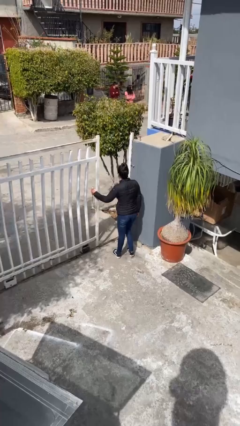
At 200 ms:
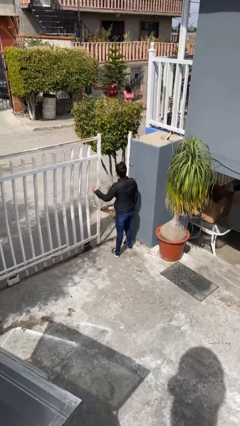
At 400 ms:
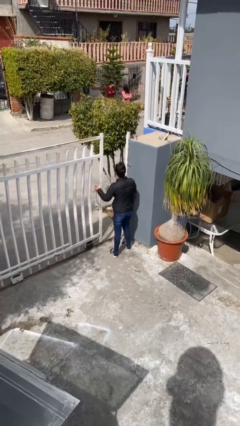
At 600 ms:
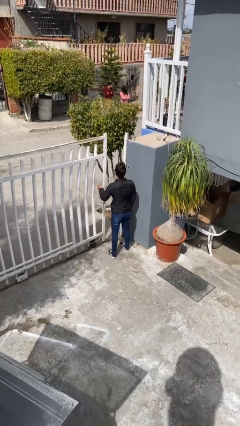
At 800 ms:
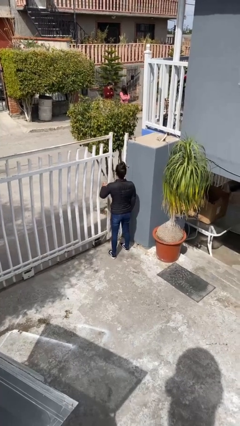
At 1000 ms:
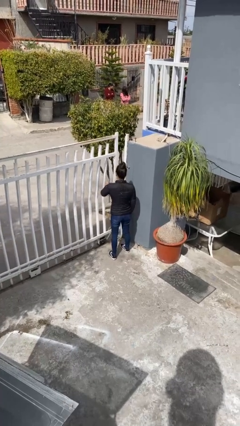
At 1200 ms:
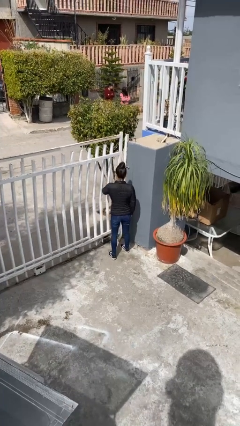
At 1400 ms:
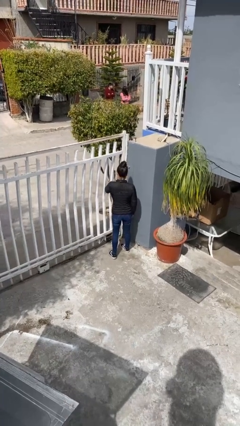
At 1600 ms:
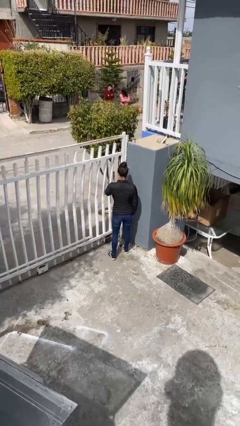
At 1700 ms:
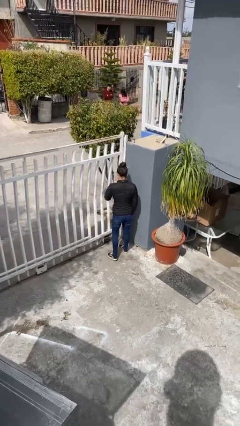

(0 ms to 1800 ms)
person closes facility door

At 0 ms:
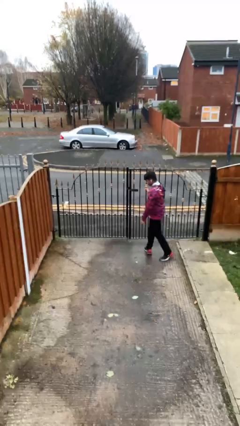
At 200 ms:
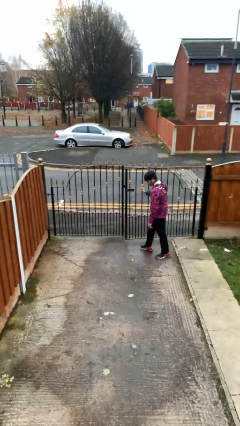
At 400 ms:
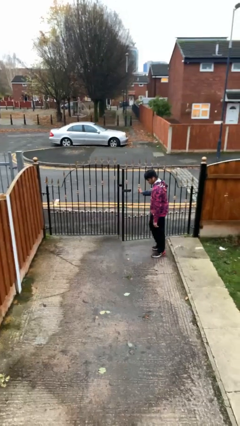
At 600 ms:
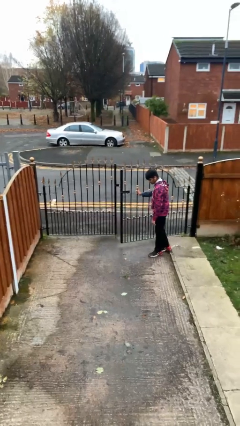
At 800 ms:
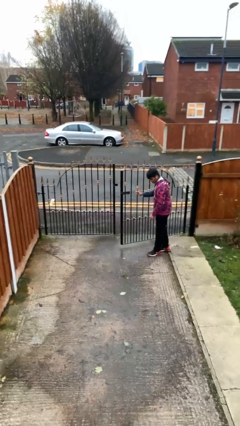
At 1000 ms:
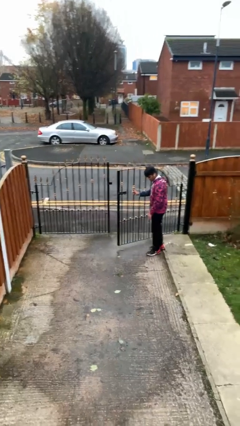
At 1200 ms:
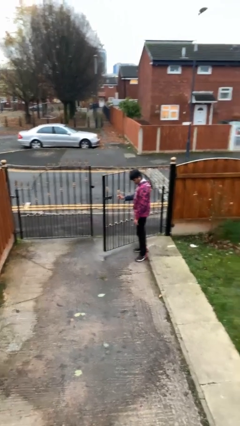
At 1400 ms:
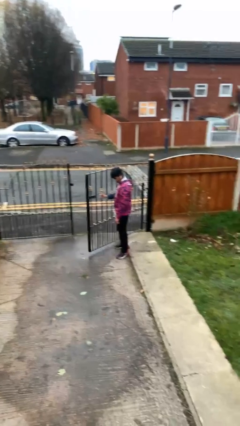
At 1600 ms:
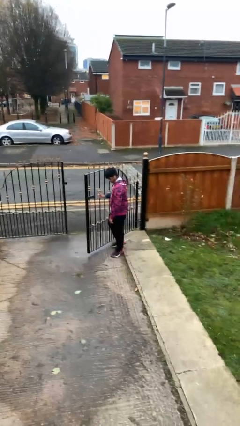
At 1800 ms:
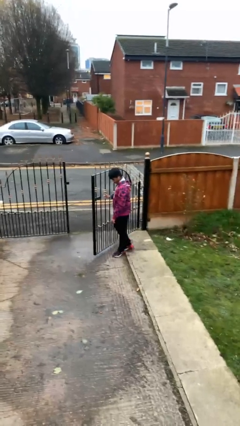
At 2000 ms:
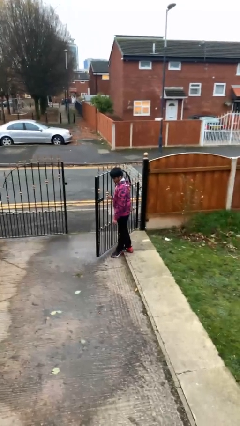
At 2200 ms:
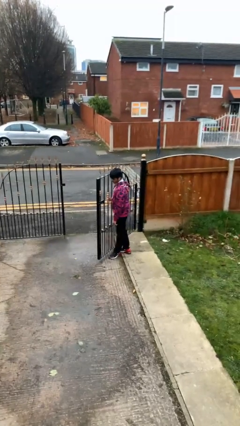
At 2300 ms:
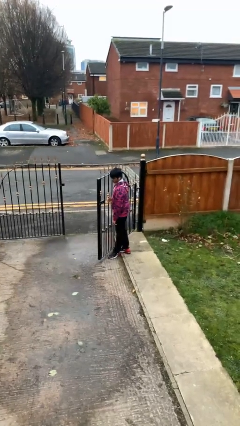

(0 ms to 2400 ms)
person opens facility door

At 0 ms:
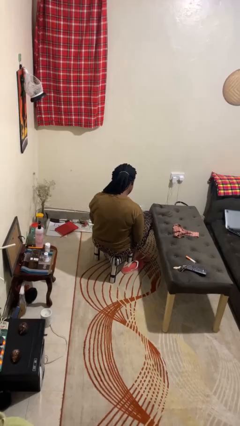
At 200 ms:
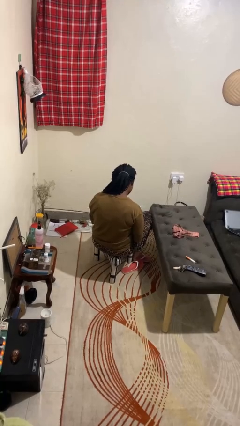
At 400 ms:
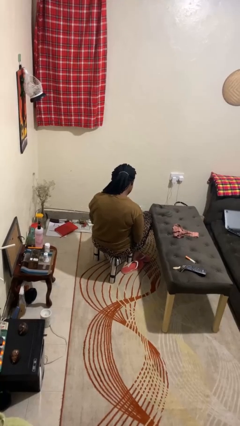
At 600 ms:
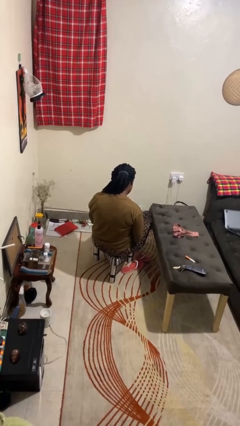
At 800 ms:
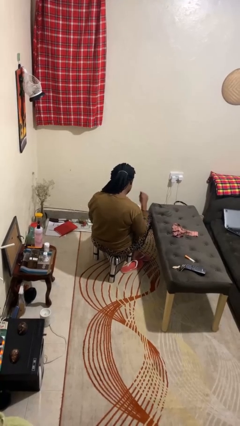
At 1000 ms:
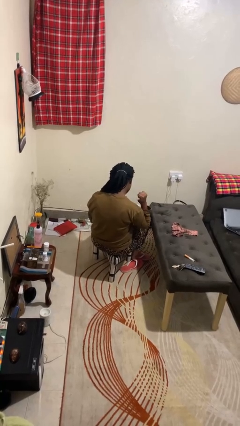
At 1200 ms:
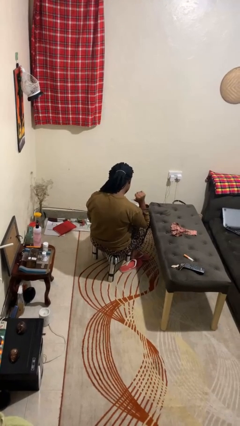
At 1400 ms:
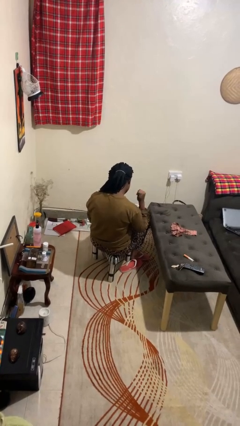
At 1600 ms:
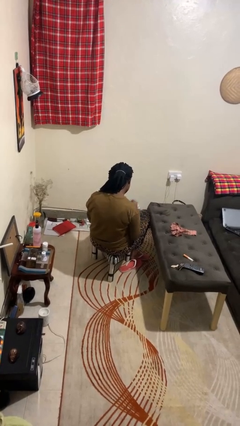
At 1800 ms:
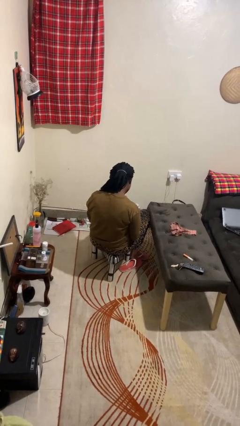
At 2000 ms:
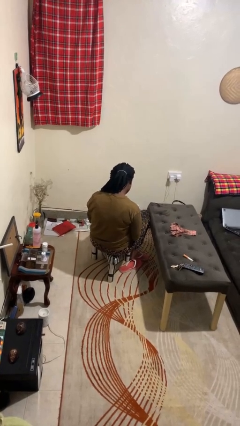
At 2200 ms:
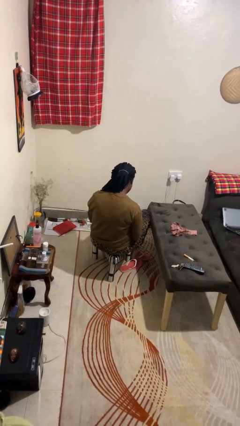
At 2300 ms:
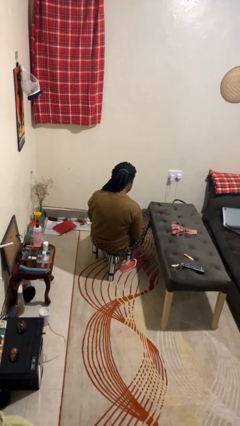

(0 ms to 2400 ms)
person gestures behind me

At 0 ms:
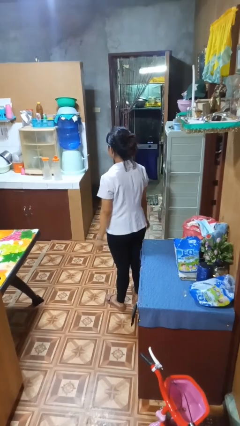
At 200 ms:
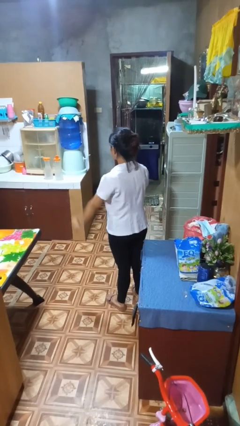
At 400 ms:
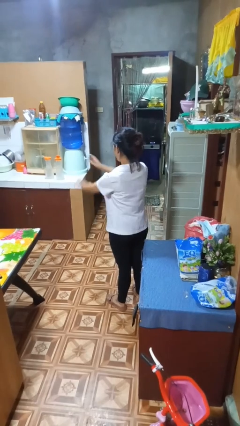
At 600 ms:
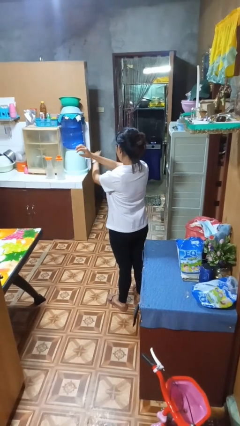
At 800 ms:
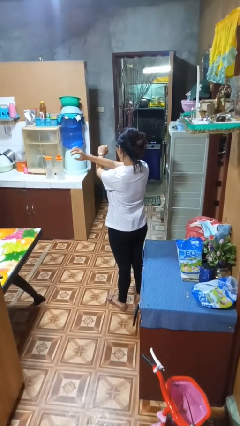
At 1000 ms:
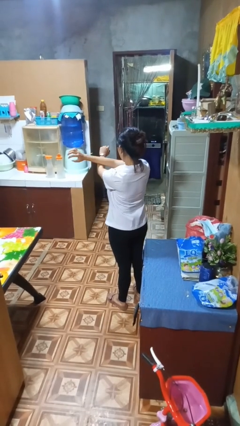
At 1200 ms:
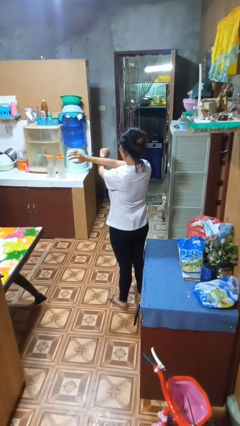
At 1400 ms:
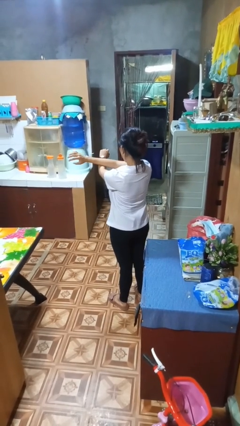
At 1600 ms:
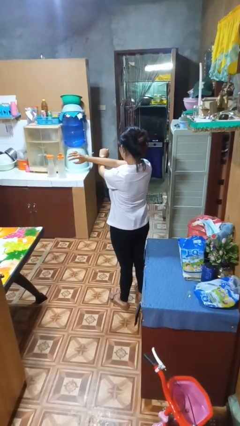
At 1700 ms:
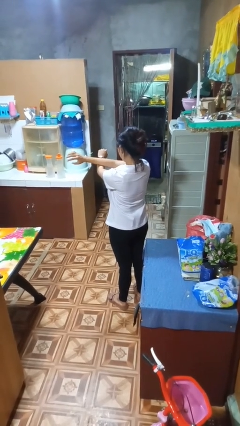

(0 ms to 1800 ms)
person crosses arms

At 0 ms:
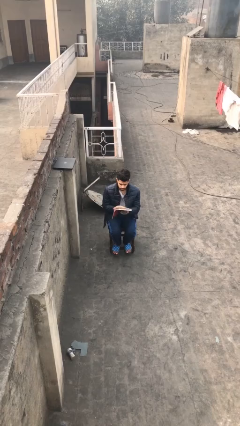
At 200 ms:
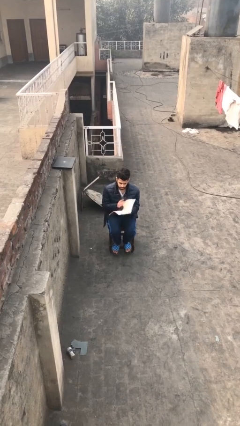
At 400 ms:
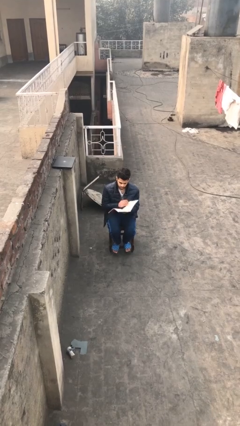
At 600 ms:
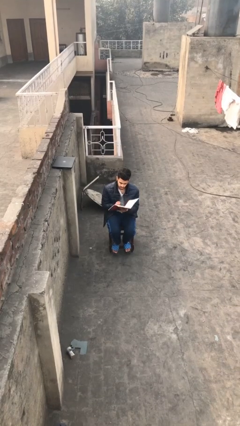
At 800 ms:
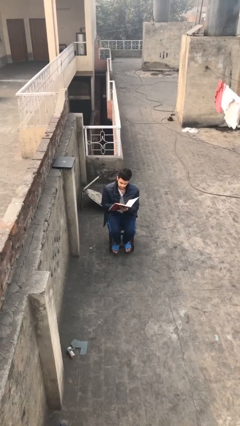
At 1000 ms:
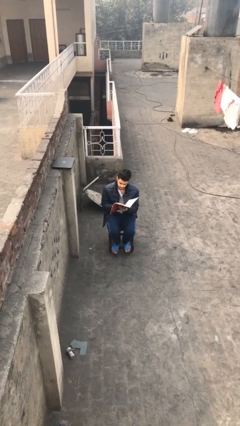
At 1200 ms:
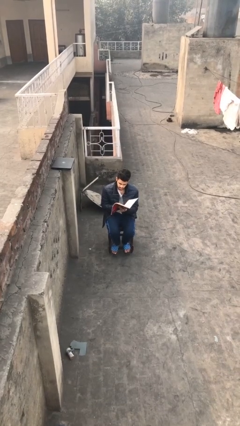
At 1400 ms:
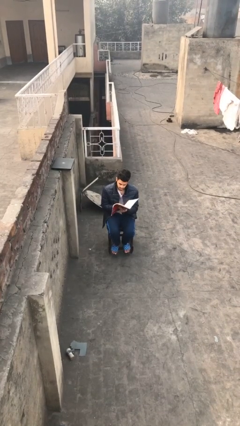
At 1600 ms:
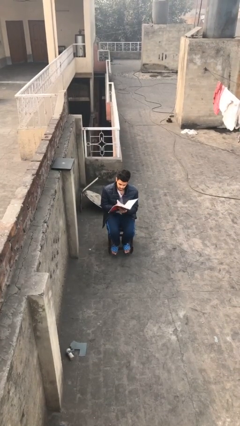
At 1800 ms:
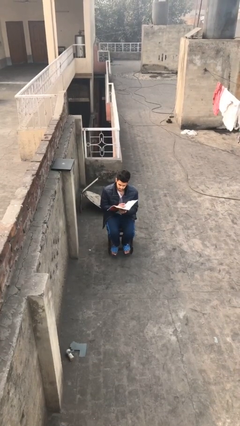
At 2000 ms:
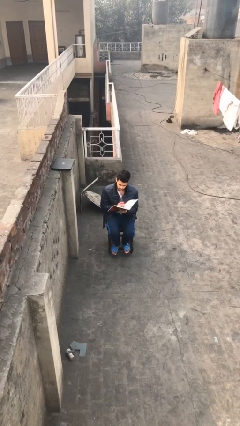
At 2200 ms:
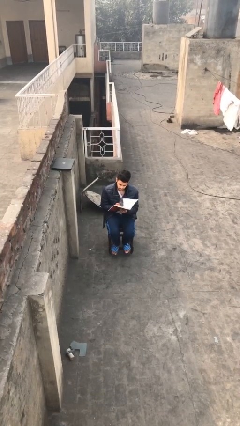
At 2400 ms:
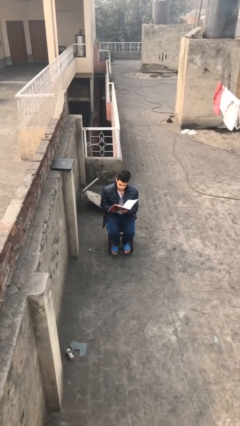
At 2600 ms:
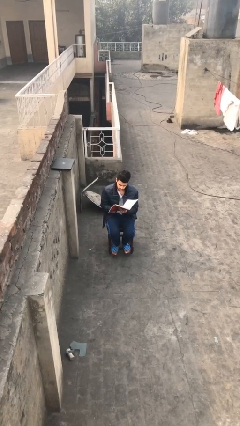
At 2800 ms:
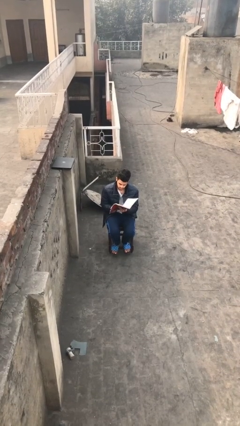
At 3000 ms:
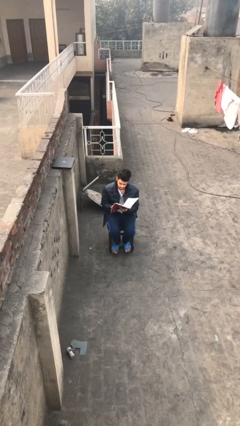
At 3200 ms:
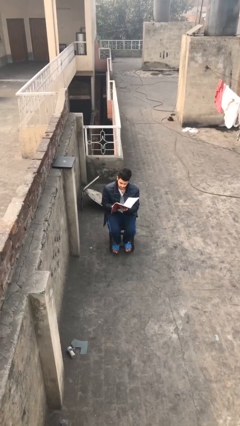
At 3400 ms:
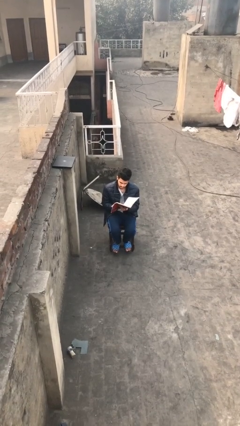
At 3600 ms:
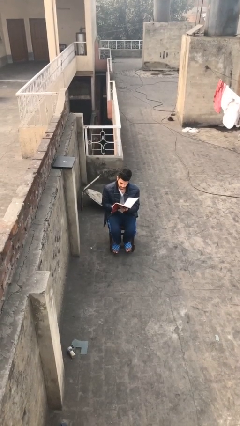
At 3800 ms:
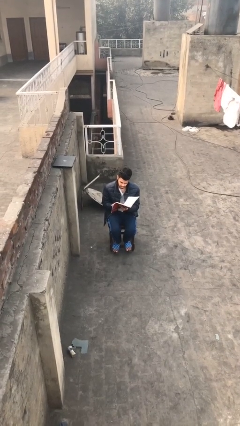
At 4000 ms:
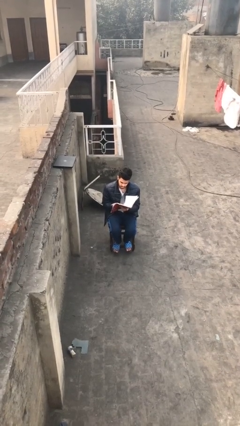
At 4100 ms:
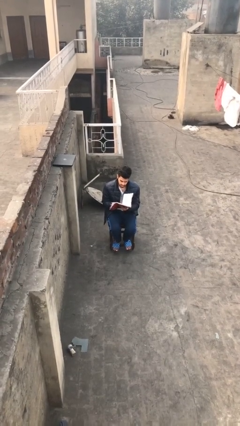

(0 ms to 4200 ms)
person reads document

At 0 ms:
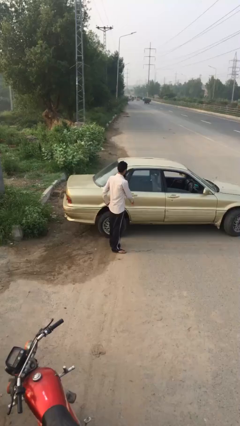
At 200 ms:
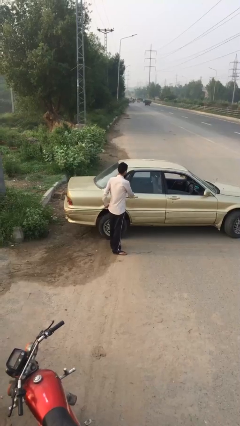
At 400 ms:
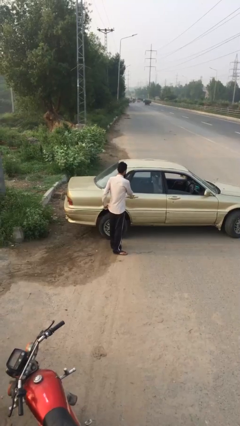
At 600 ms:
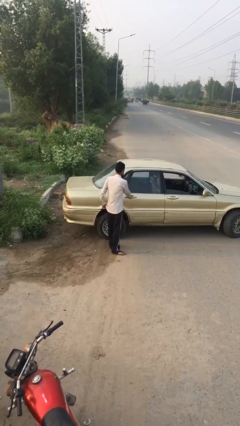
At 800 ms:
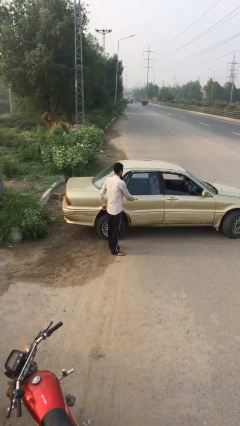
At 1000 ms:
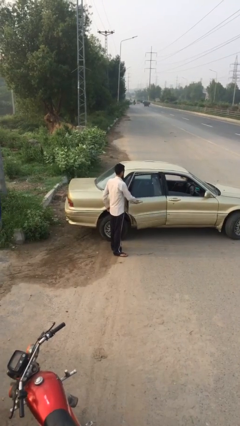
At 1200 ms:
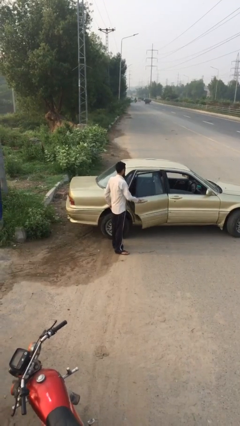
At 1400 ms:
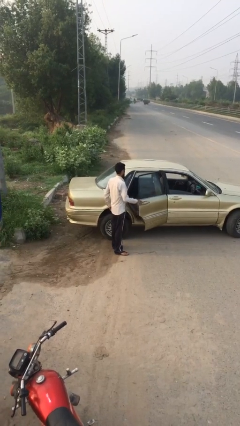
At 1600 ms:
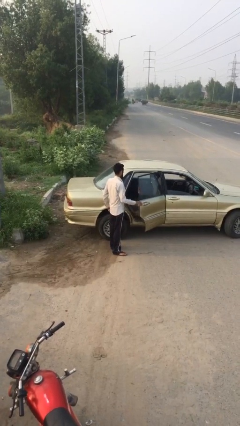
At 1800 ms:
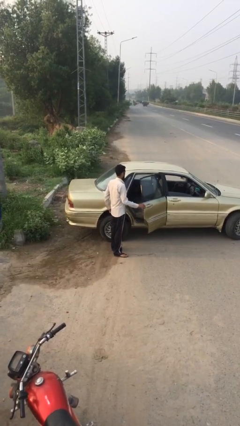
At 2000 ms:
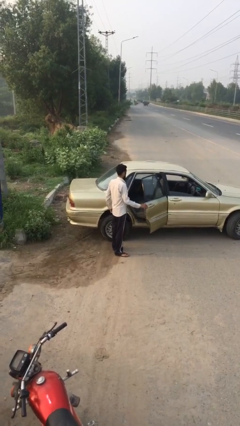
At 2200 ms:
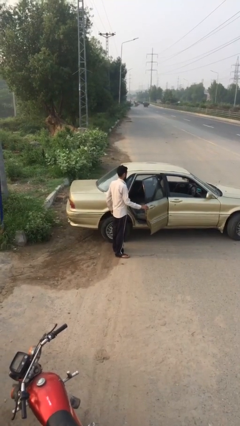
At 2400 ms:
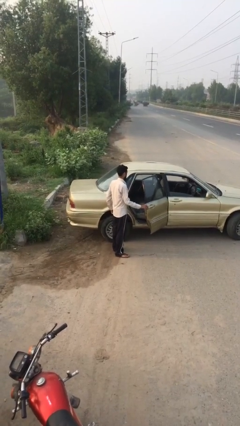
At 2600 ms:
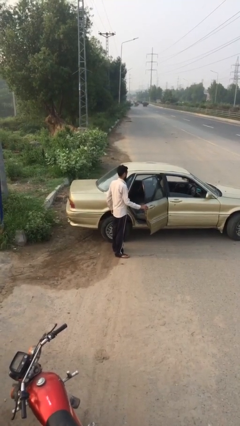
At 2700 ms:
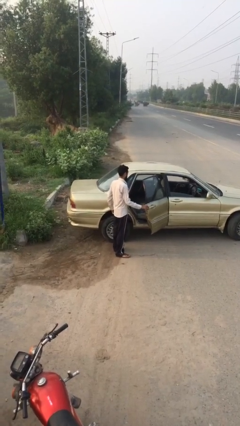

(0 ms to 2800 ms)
person opens car door

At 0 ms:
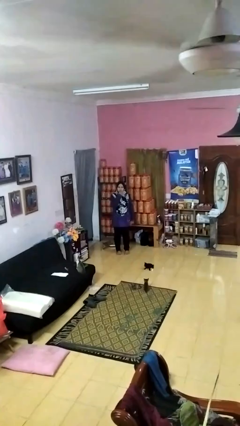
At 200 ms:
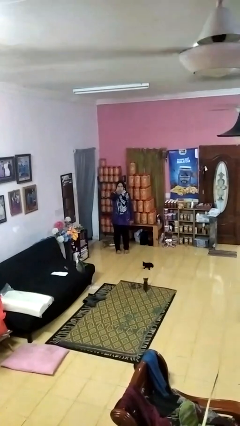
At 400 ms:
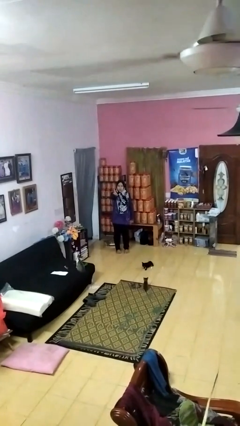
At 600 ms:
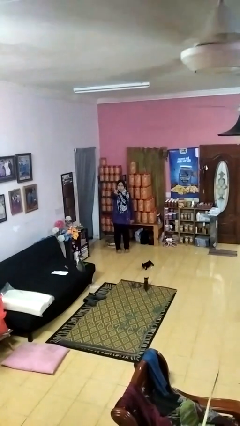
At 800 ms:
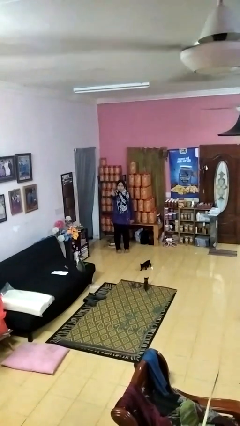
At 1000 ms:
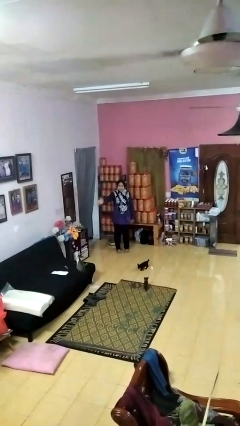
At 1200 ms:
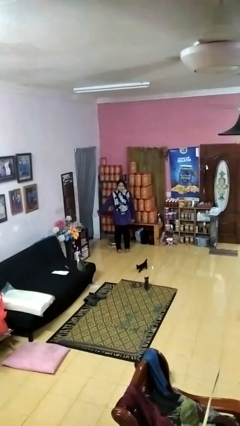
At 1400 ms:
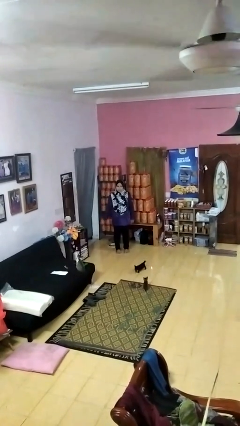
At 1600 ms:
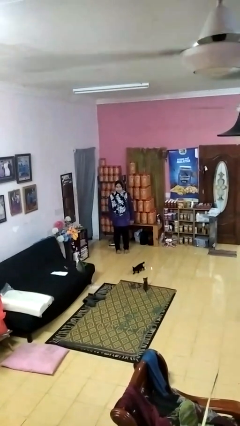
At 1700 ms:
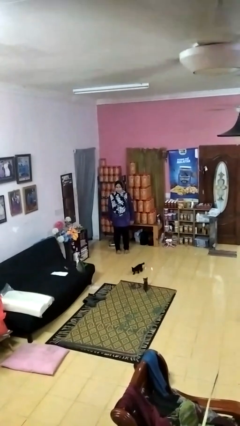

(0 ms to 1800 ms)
person gestures blow kiss
